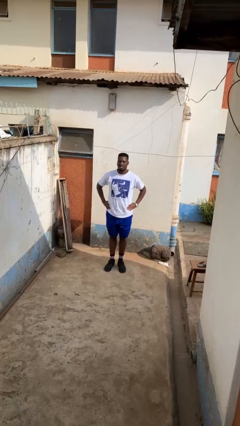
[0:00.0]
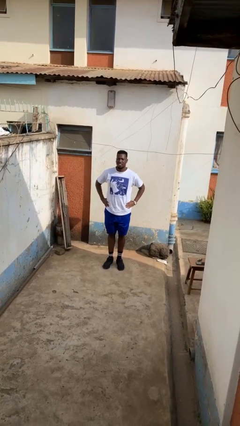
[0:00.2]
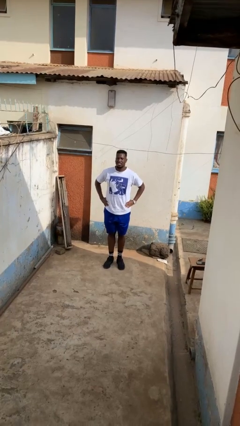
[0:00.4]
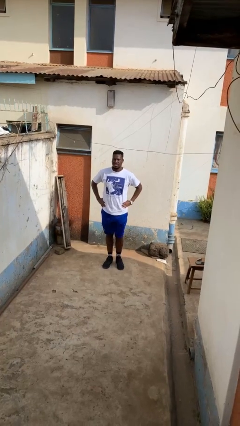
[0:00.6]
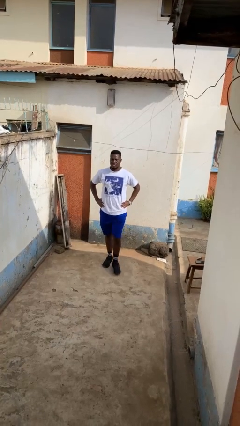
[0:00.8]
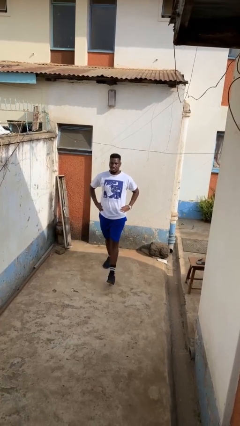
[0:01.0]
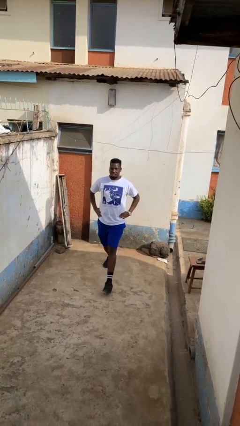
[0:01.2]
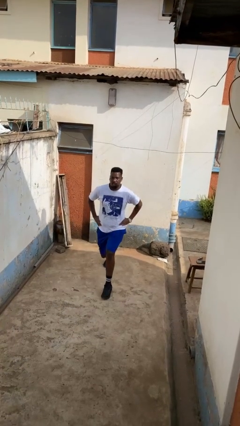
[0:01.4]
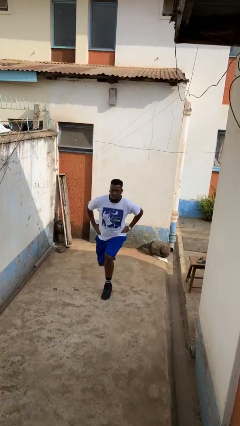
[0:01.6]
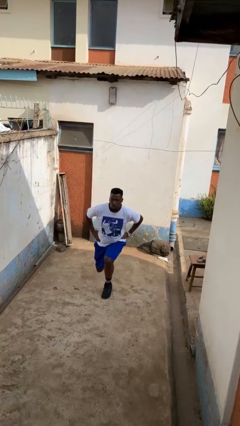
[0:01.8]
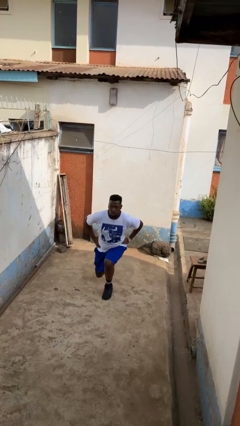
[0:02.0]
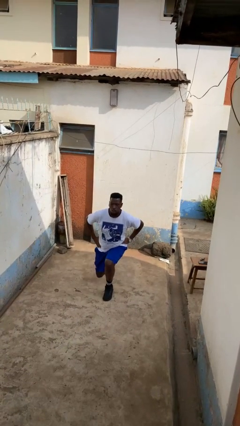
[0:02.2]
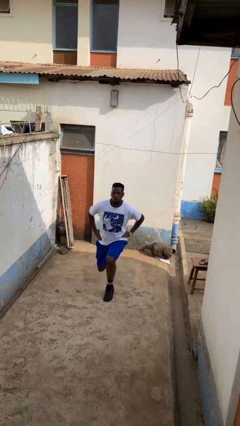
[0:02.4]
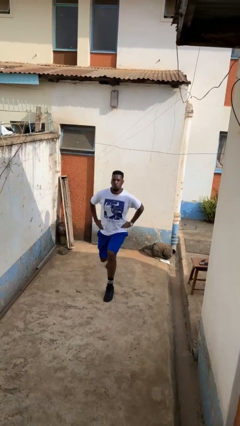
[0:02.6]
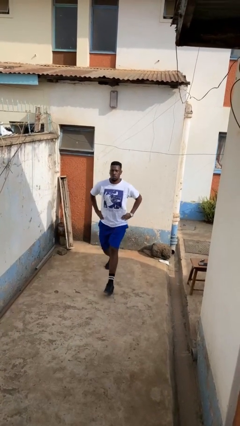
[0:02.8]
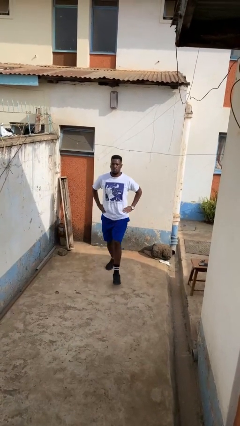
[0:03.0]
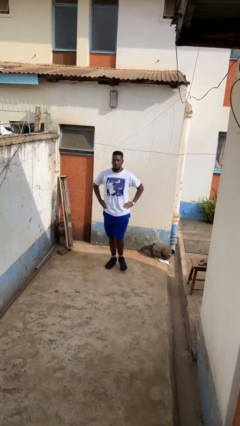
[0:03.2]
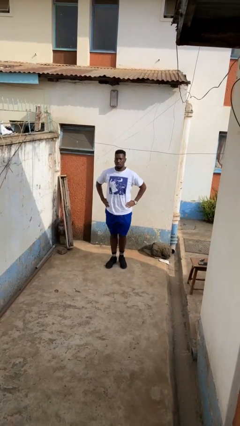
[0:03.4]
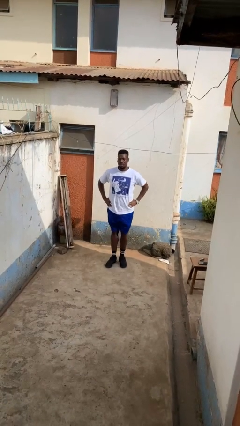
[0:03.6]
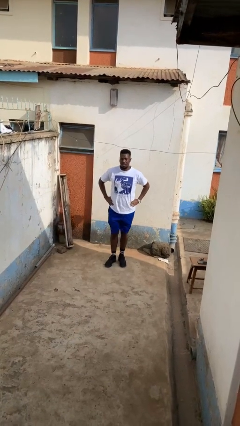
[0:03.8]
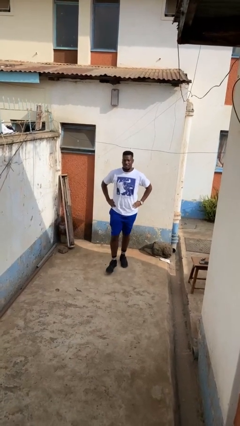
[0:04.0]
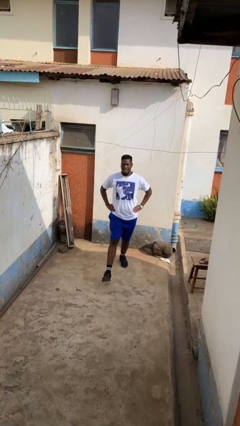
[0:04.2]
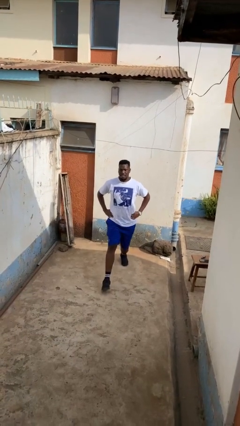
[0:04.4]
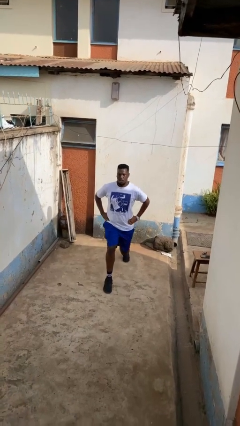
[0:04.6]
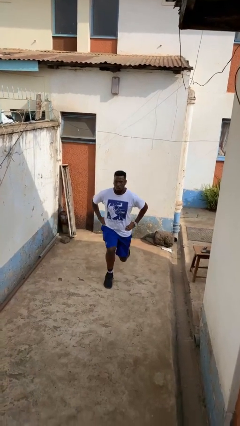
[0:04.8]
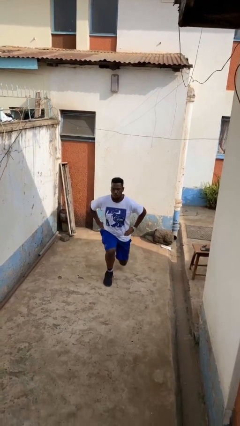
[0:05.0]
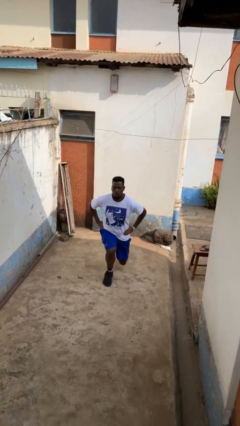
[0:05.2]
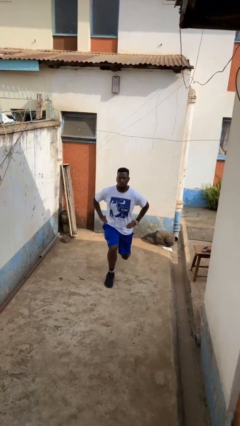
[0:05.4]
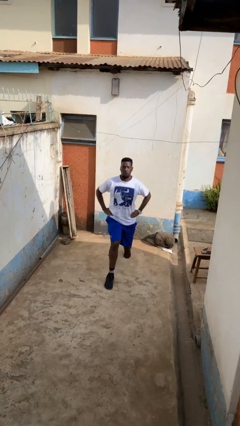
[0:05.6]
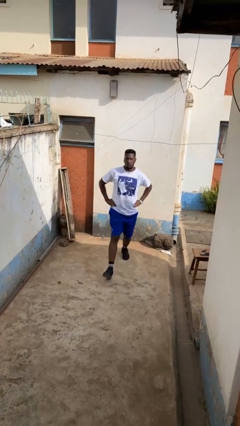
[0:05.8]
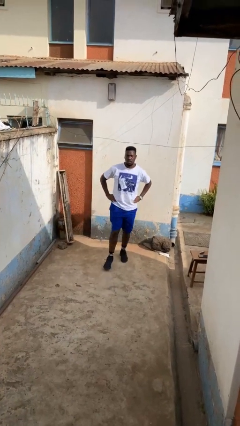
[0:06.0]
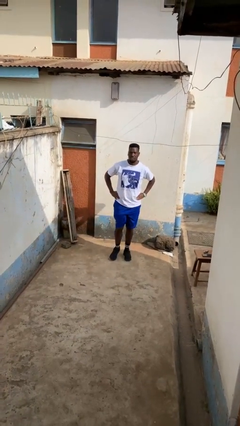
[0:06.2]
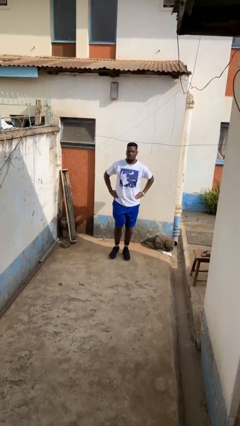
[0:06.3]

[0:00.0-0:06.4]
person exercises with lunges

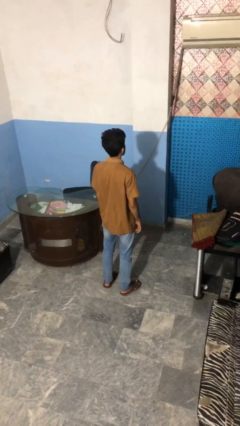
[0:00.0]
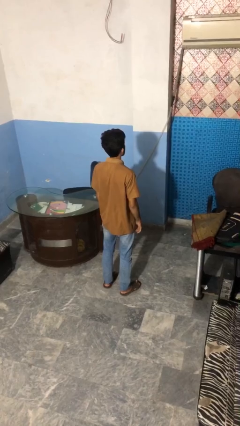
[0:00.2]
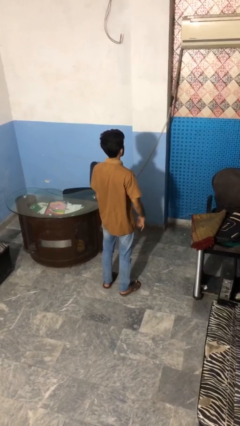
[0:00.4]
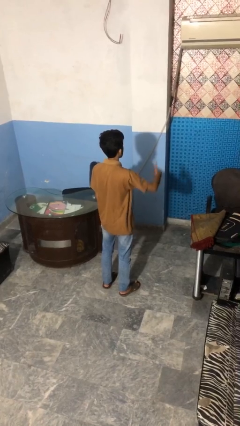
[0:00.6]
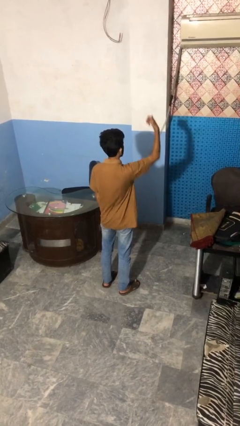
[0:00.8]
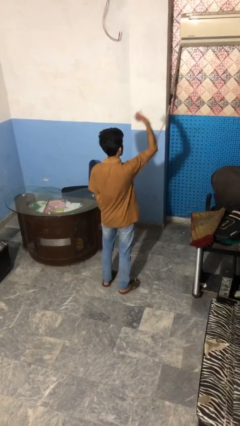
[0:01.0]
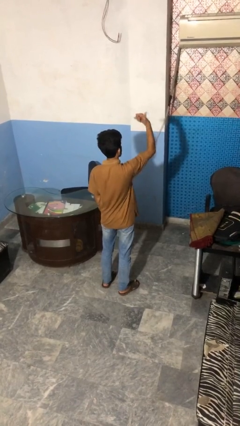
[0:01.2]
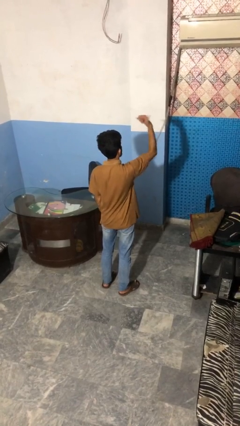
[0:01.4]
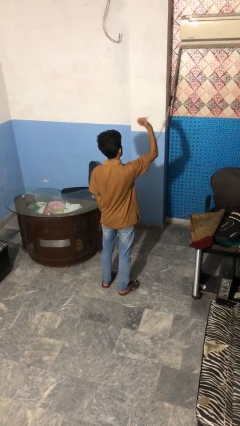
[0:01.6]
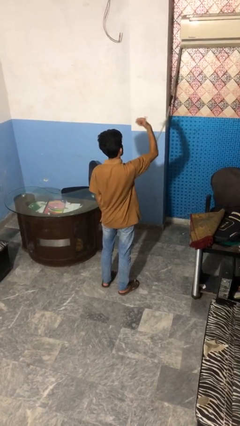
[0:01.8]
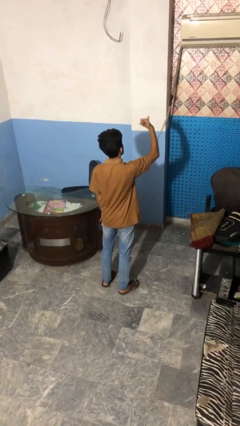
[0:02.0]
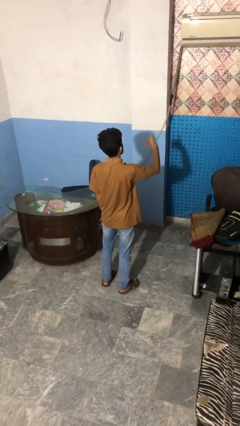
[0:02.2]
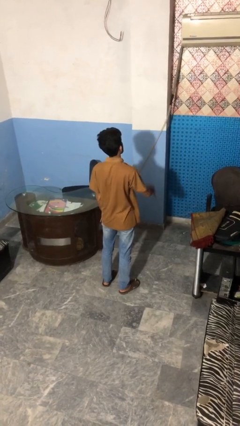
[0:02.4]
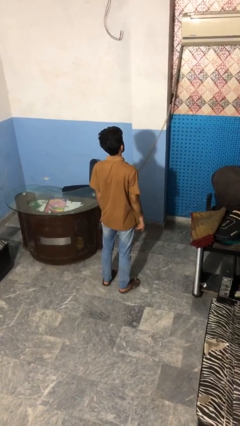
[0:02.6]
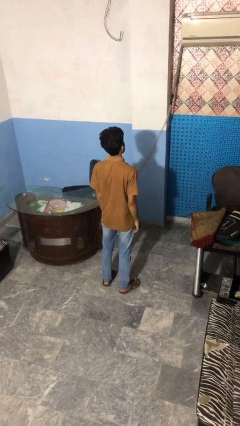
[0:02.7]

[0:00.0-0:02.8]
person gestures hang loose

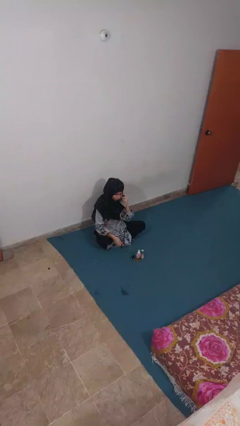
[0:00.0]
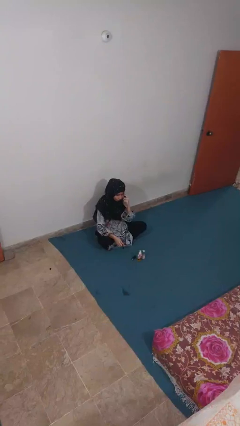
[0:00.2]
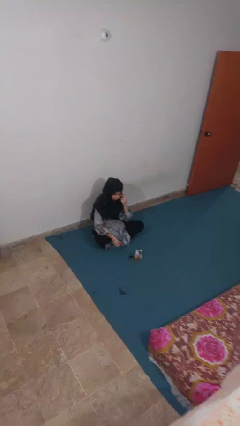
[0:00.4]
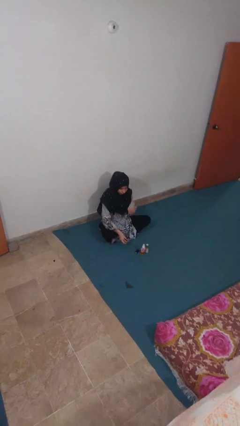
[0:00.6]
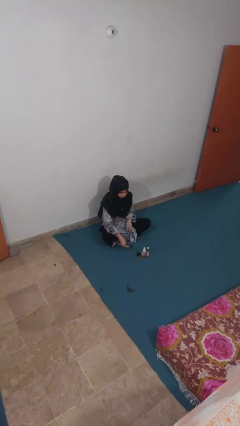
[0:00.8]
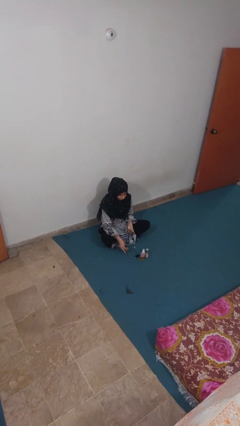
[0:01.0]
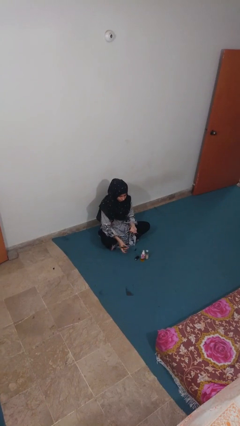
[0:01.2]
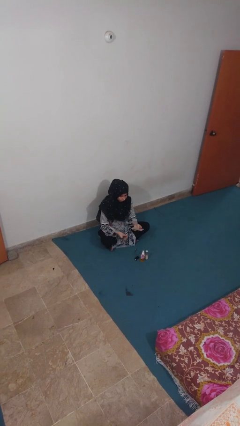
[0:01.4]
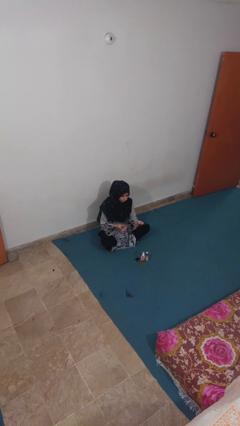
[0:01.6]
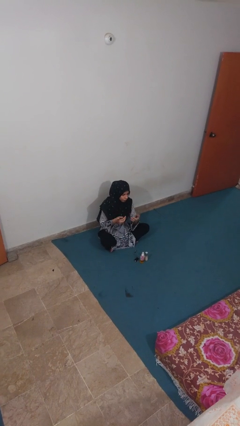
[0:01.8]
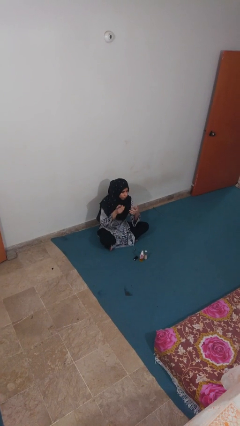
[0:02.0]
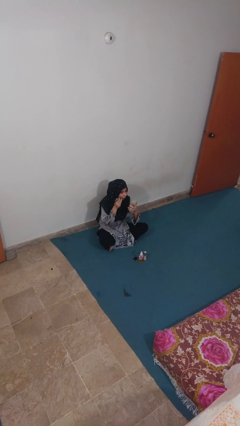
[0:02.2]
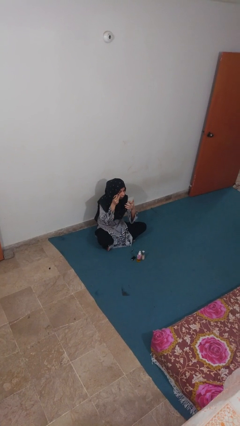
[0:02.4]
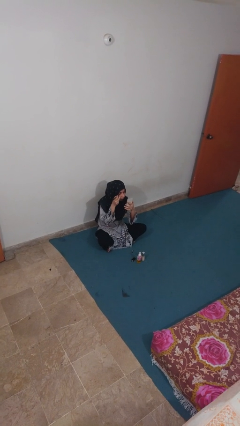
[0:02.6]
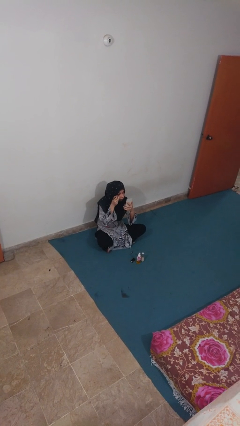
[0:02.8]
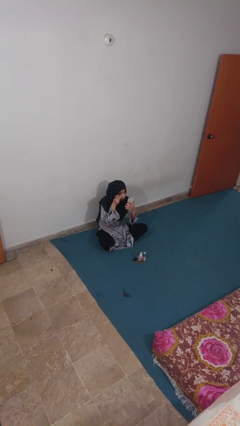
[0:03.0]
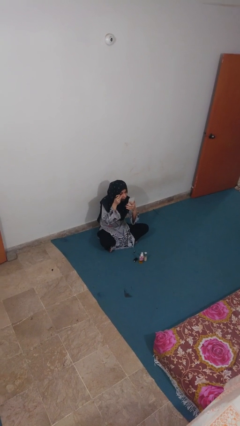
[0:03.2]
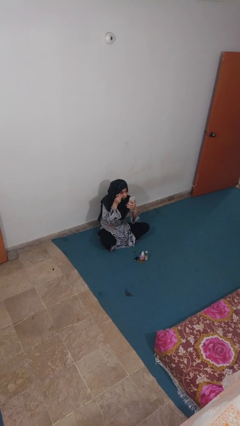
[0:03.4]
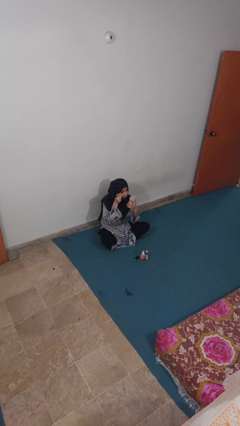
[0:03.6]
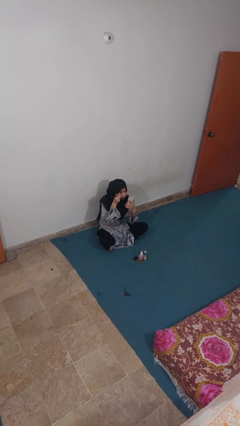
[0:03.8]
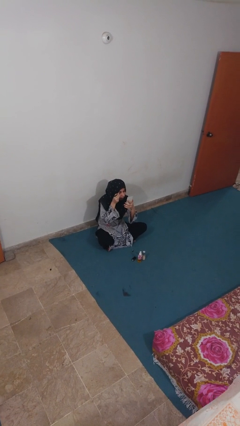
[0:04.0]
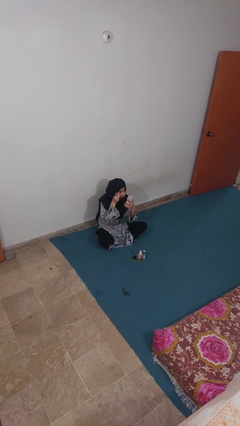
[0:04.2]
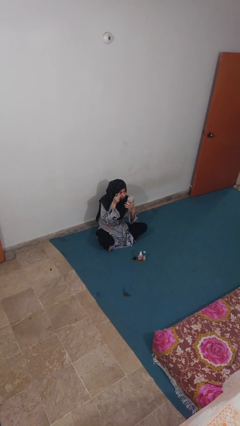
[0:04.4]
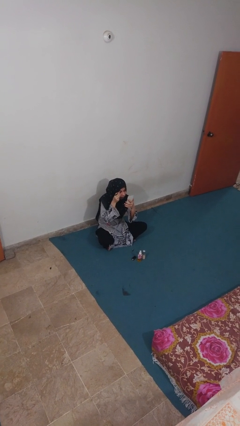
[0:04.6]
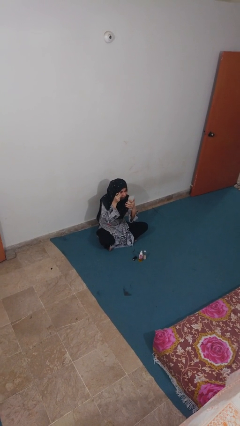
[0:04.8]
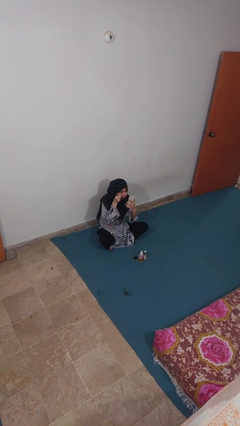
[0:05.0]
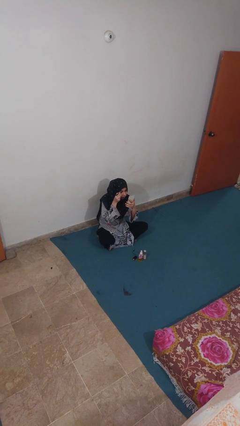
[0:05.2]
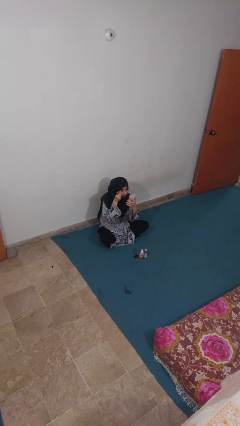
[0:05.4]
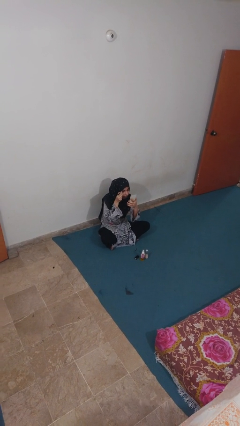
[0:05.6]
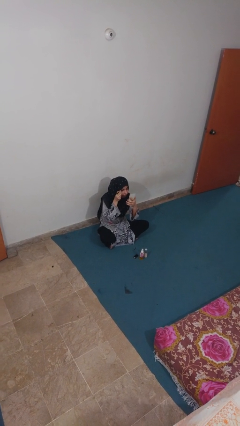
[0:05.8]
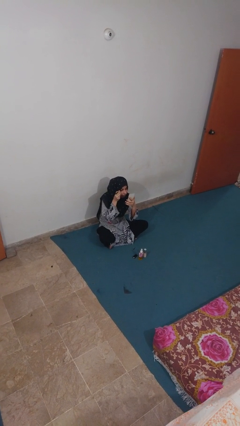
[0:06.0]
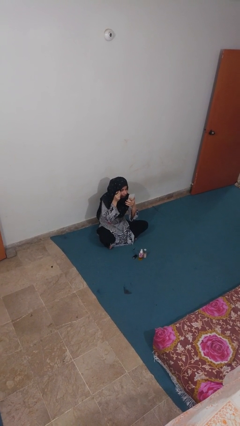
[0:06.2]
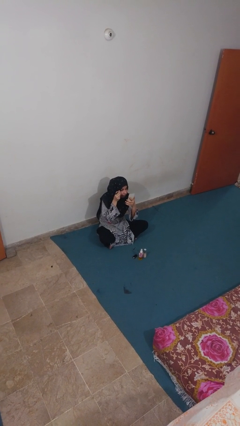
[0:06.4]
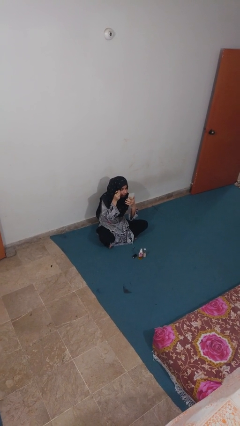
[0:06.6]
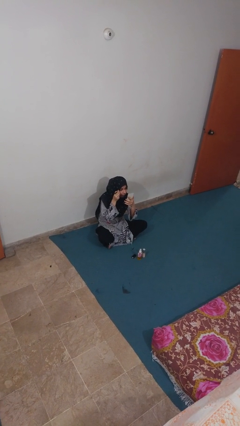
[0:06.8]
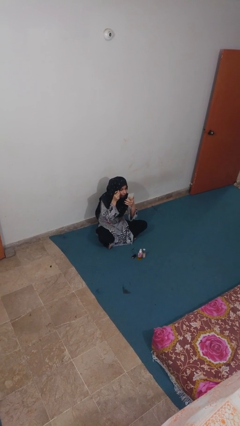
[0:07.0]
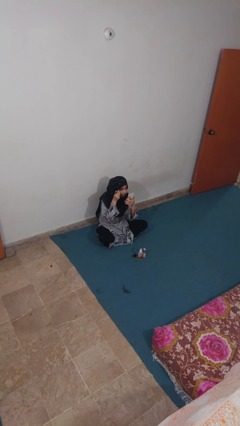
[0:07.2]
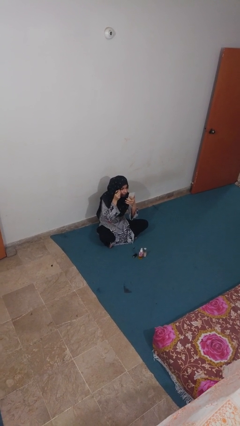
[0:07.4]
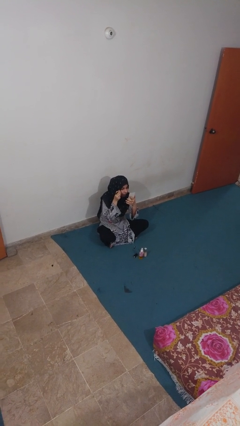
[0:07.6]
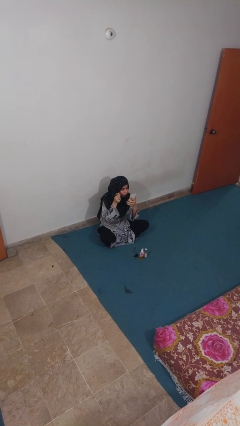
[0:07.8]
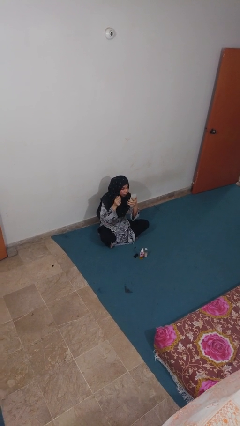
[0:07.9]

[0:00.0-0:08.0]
person applies eye makeup

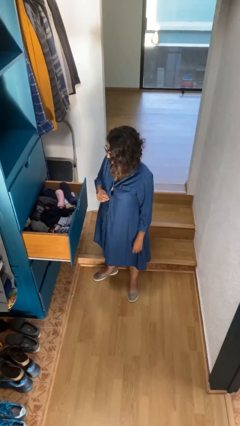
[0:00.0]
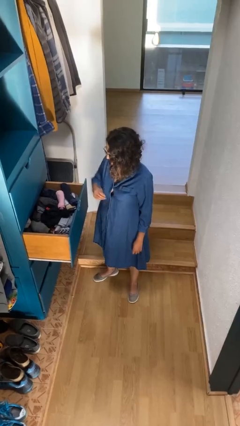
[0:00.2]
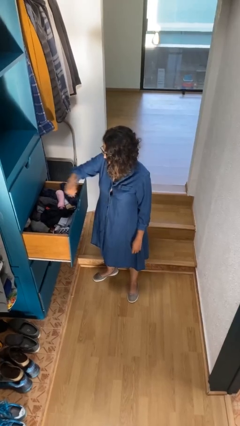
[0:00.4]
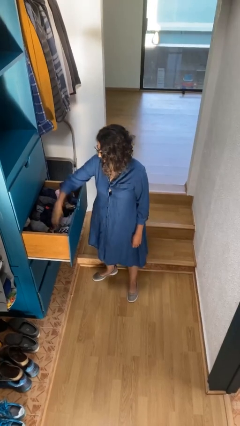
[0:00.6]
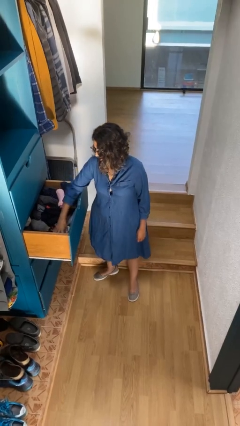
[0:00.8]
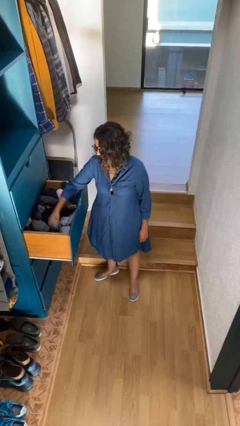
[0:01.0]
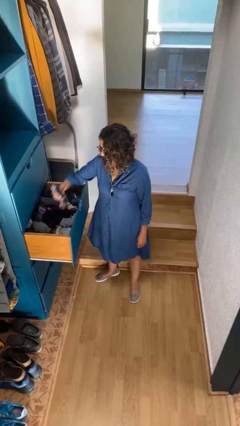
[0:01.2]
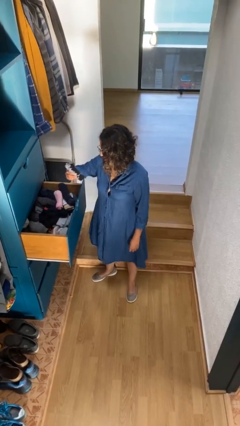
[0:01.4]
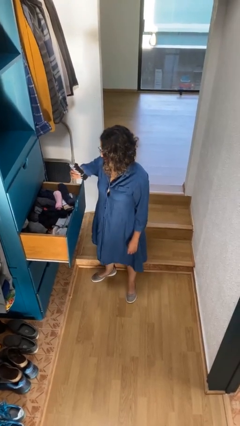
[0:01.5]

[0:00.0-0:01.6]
person takes clothes from dresser
